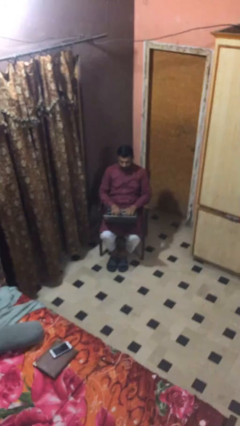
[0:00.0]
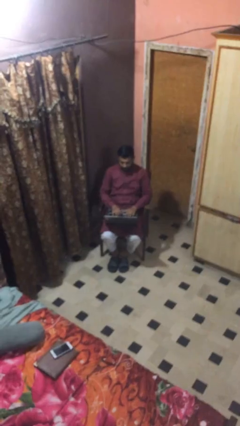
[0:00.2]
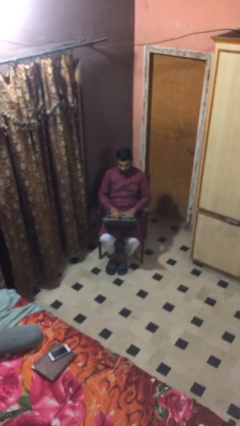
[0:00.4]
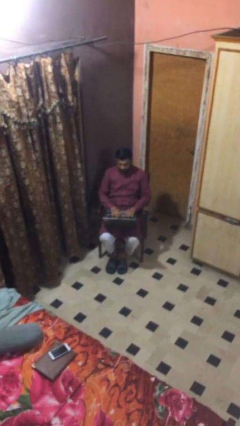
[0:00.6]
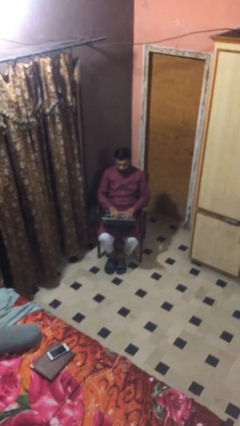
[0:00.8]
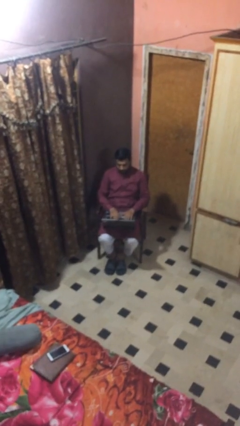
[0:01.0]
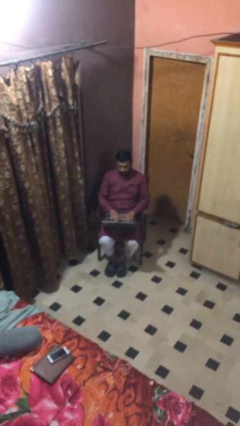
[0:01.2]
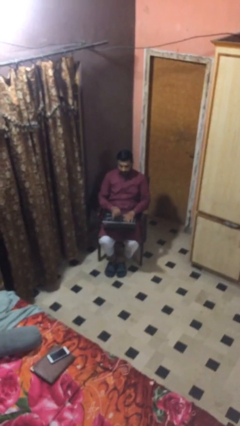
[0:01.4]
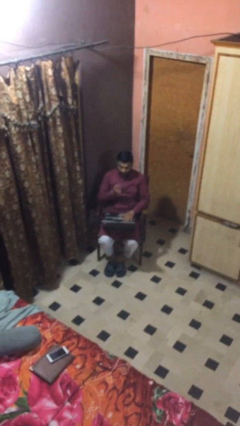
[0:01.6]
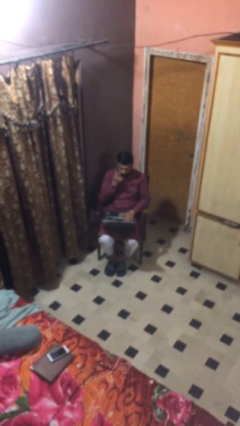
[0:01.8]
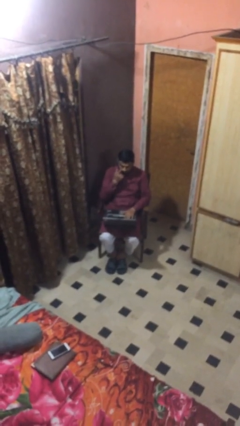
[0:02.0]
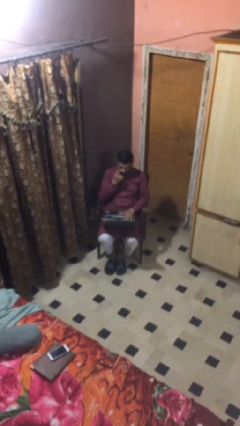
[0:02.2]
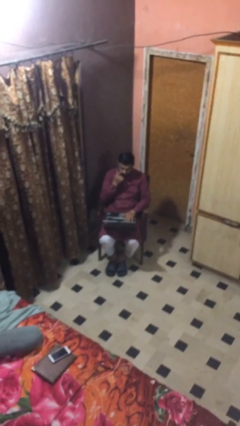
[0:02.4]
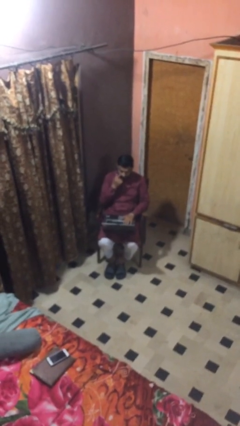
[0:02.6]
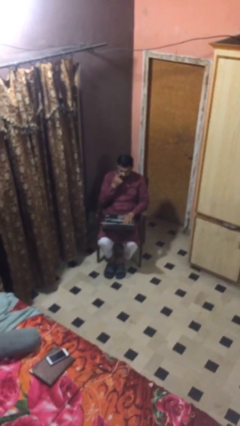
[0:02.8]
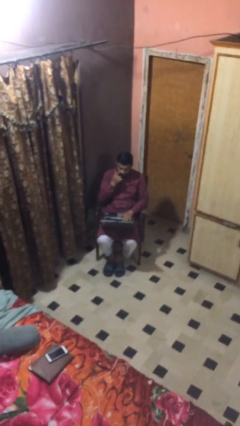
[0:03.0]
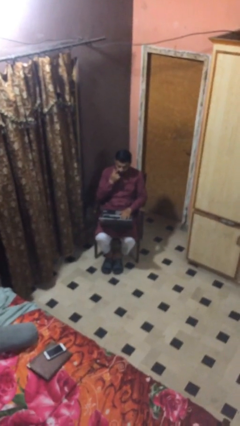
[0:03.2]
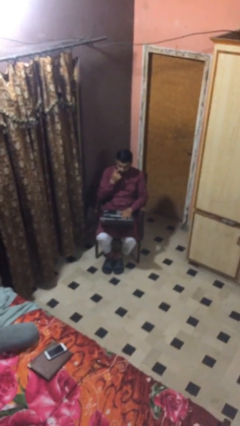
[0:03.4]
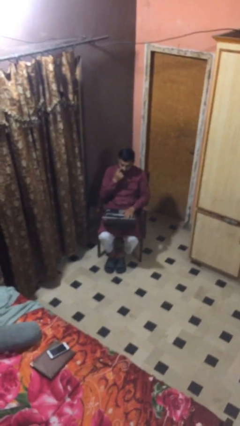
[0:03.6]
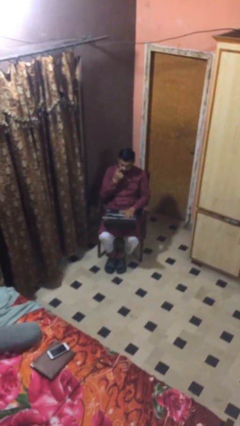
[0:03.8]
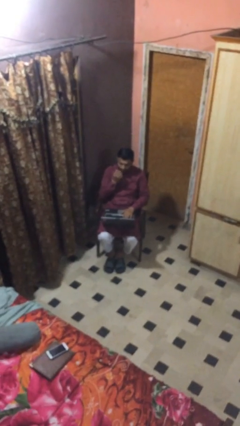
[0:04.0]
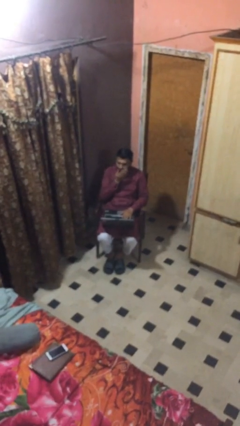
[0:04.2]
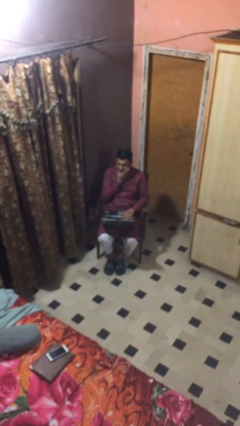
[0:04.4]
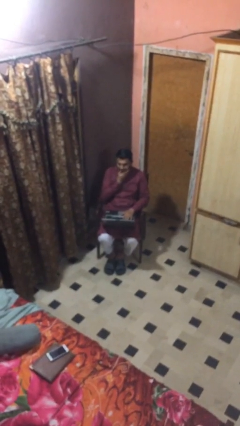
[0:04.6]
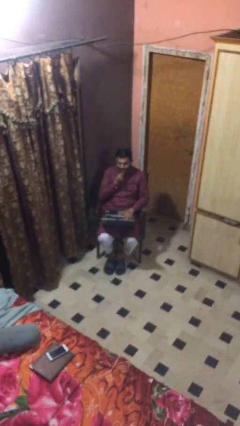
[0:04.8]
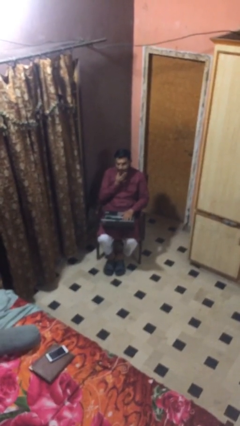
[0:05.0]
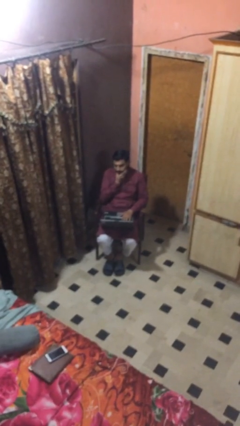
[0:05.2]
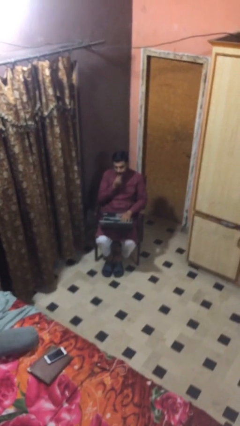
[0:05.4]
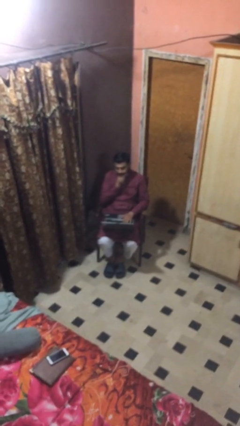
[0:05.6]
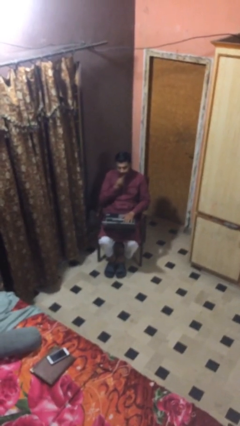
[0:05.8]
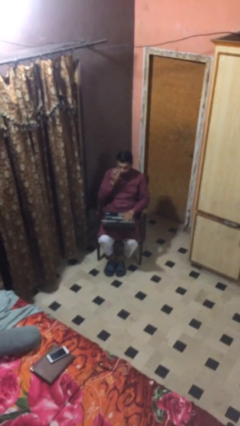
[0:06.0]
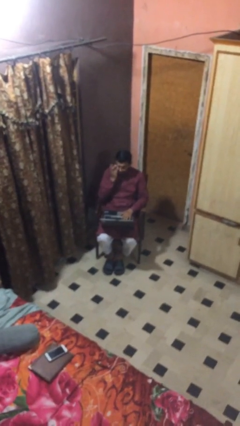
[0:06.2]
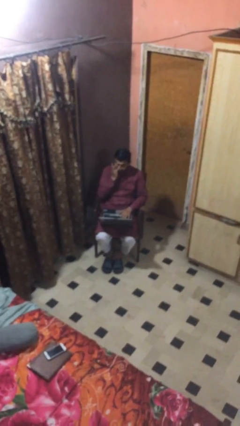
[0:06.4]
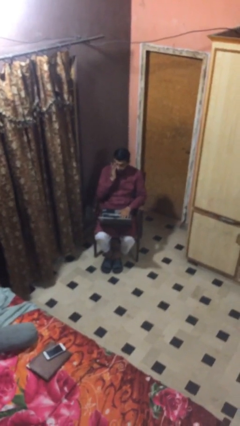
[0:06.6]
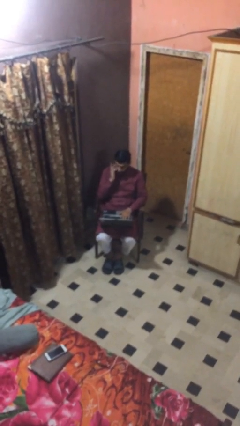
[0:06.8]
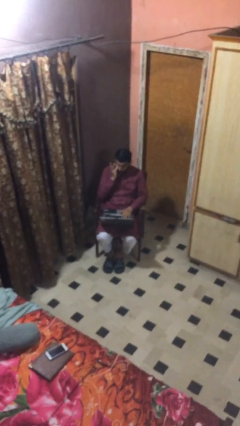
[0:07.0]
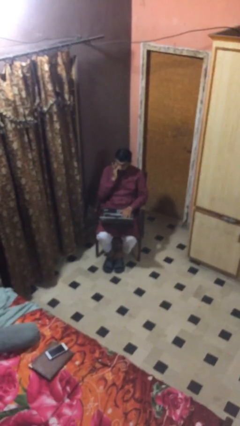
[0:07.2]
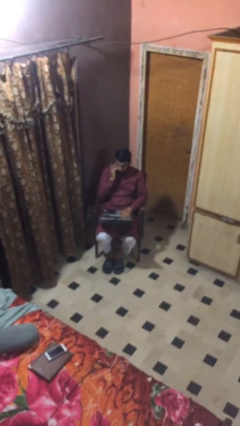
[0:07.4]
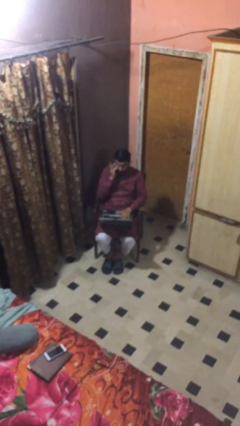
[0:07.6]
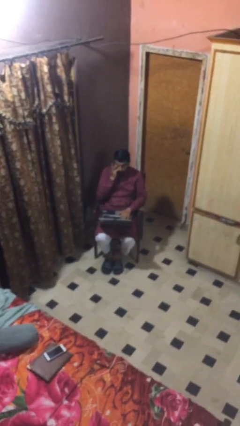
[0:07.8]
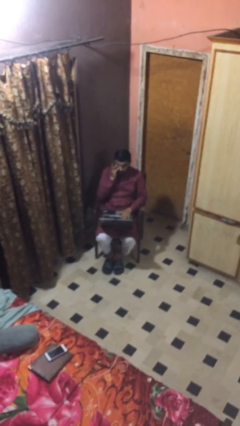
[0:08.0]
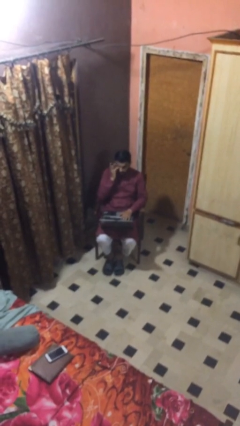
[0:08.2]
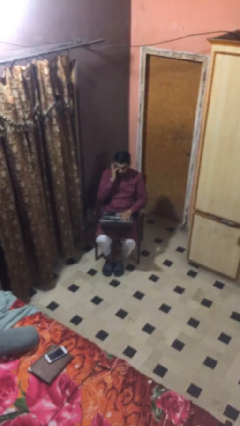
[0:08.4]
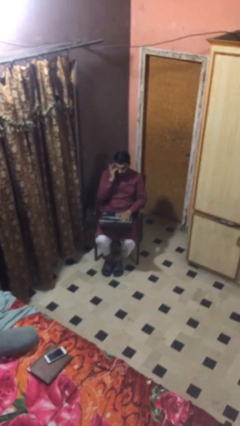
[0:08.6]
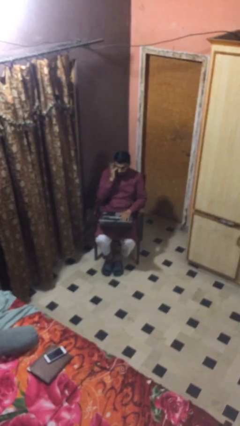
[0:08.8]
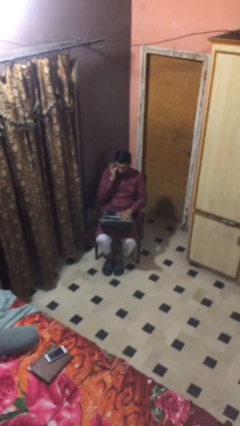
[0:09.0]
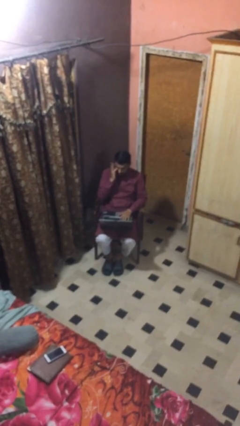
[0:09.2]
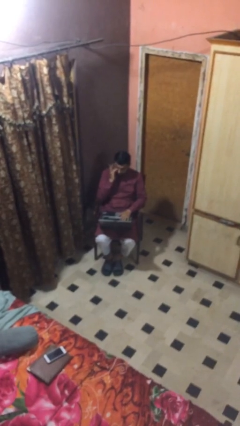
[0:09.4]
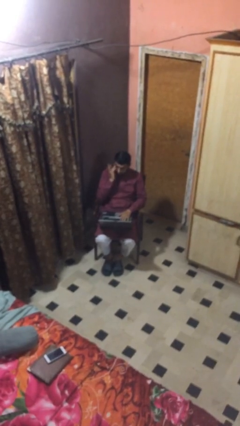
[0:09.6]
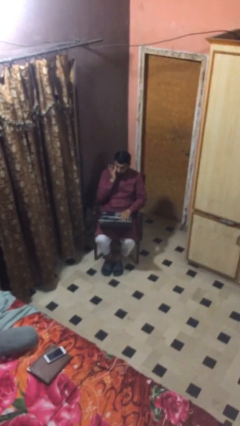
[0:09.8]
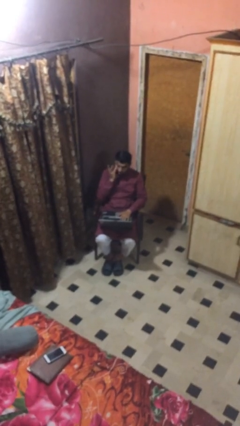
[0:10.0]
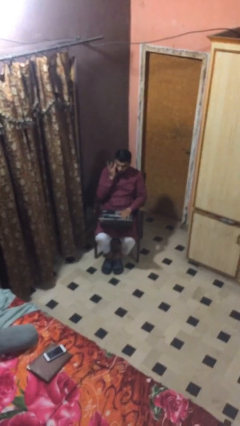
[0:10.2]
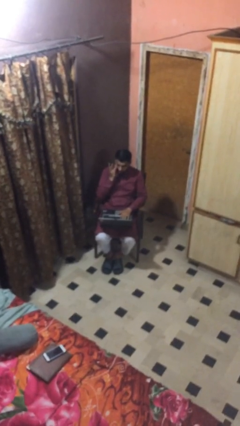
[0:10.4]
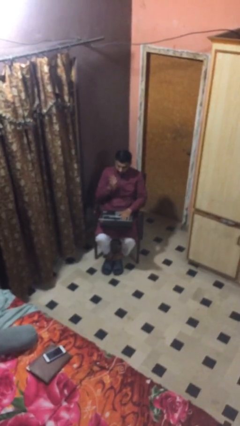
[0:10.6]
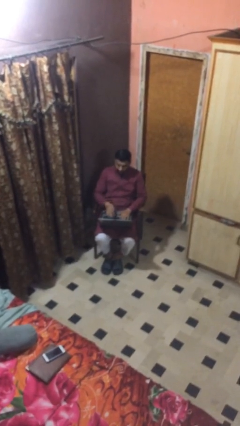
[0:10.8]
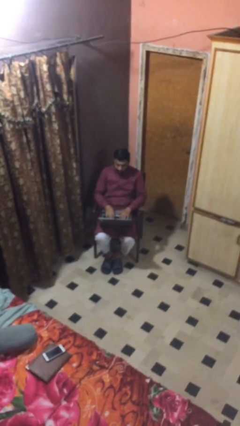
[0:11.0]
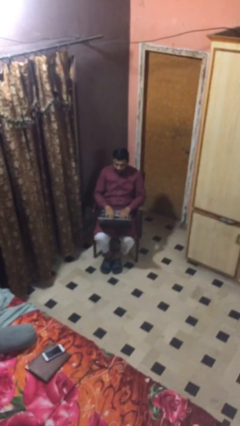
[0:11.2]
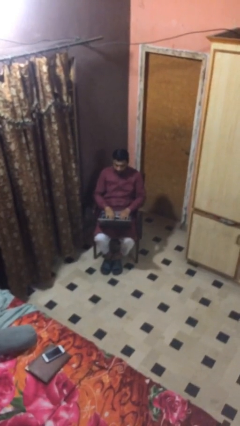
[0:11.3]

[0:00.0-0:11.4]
person interacts with laptop

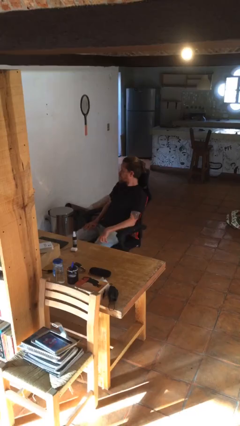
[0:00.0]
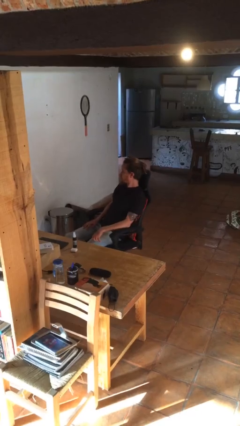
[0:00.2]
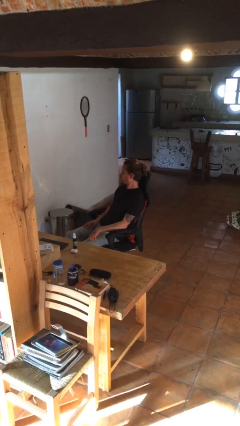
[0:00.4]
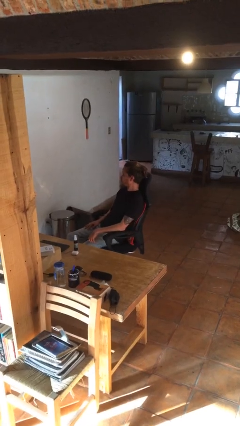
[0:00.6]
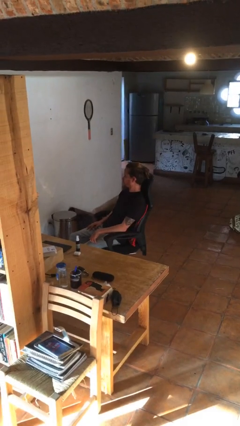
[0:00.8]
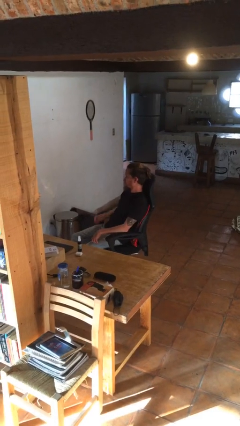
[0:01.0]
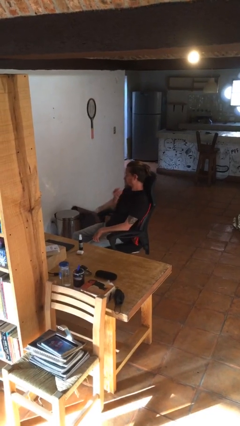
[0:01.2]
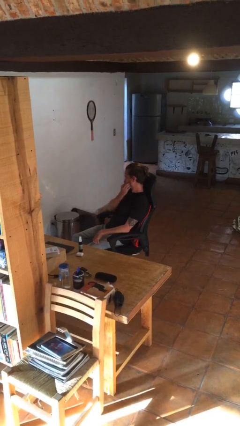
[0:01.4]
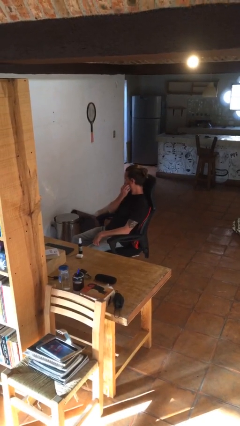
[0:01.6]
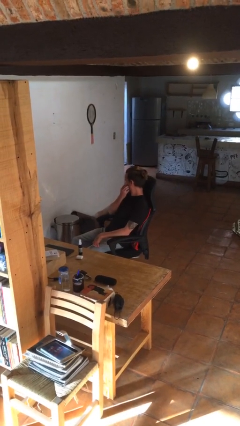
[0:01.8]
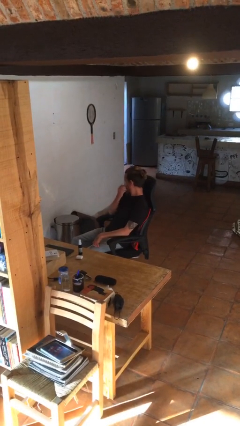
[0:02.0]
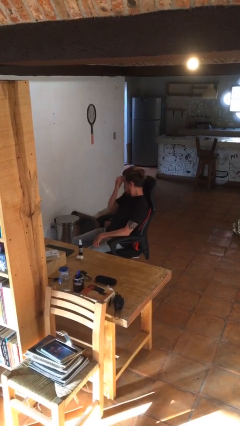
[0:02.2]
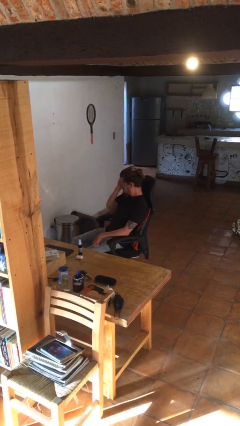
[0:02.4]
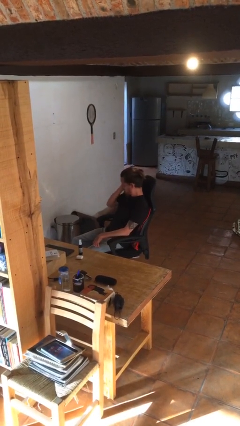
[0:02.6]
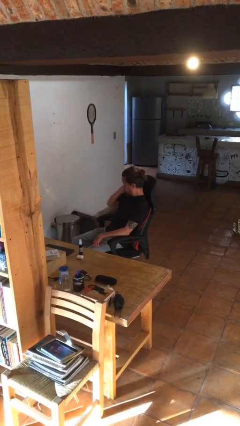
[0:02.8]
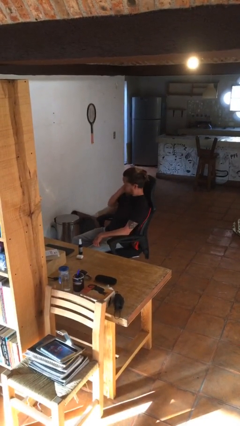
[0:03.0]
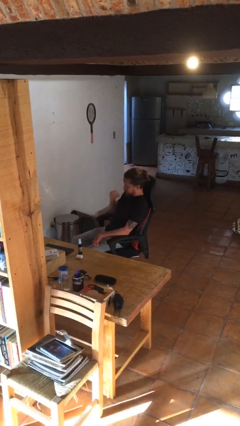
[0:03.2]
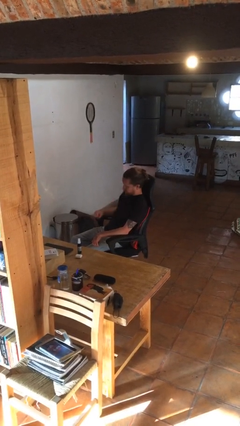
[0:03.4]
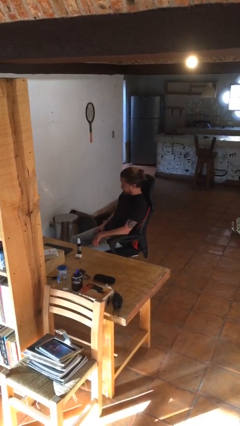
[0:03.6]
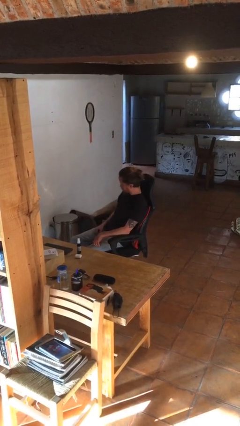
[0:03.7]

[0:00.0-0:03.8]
person scratches face

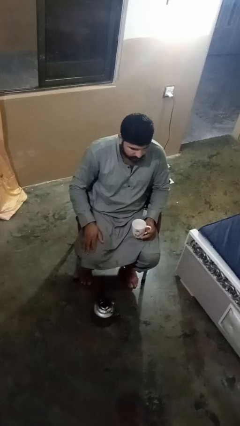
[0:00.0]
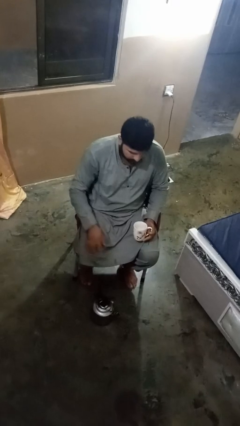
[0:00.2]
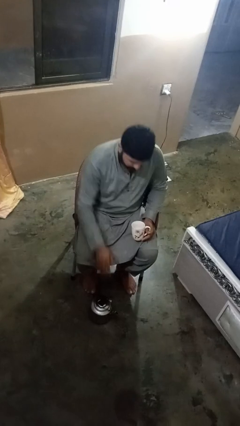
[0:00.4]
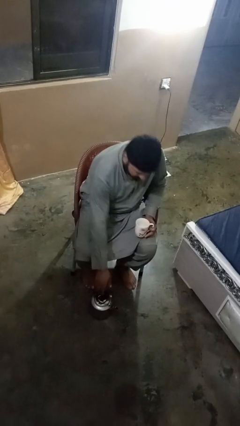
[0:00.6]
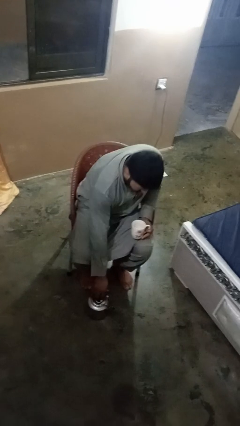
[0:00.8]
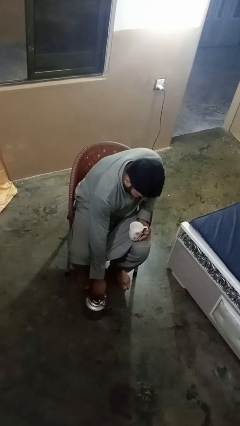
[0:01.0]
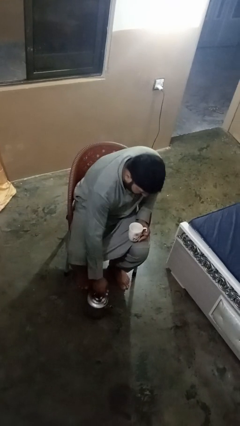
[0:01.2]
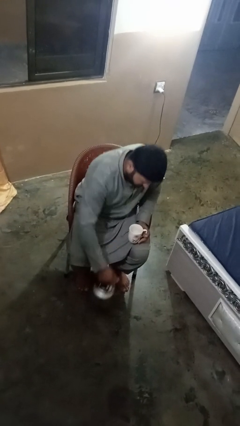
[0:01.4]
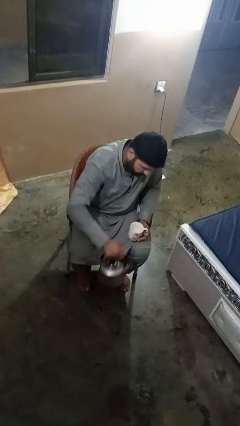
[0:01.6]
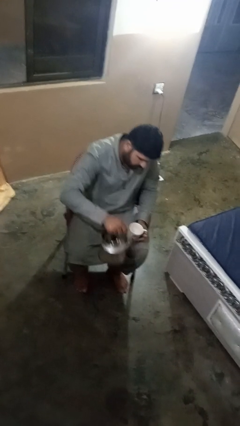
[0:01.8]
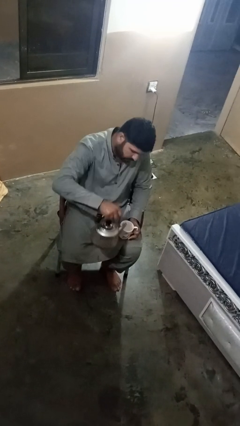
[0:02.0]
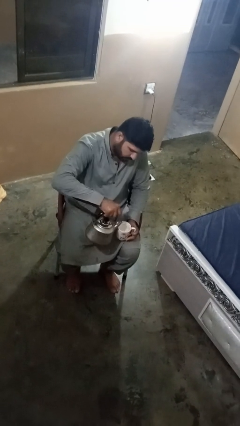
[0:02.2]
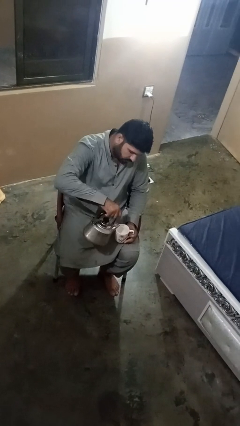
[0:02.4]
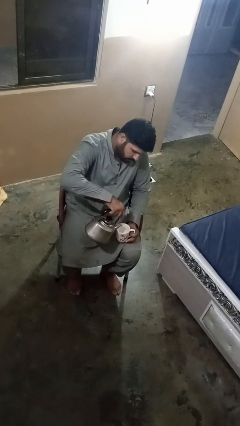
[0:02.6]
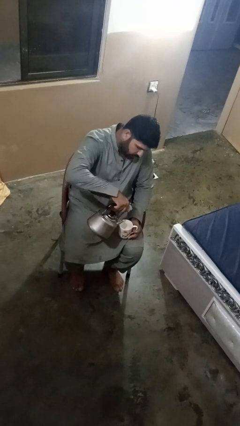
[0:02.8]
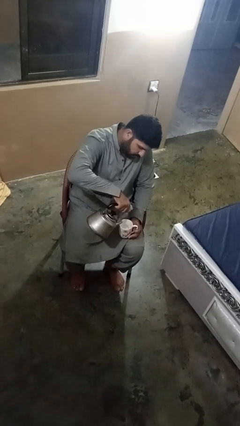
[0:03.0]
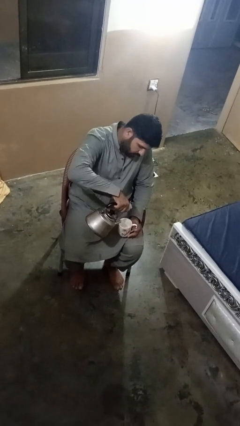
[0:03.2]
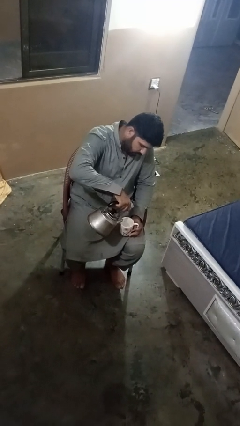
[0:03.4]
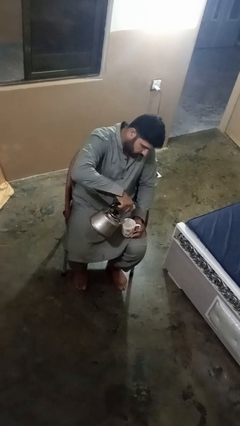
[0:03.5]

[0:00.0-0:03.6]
person pours coffee into mug
